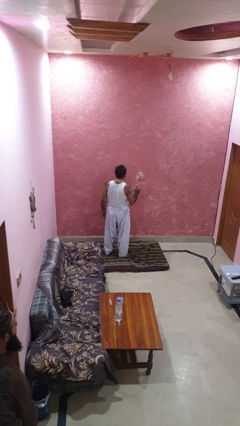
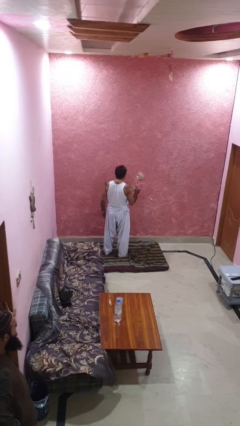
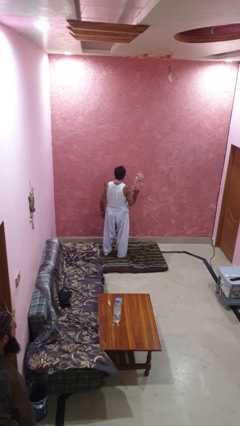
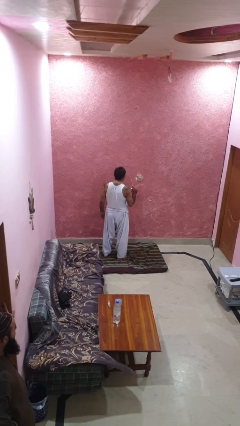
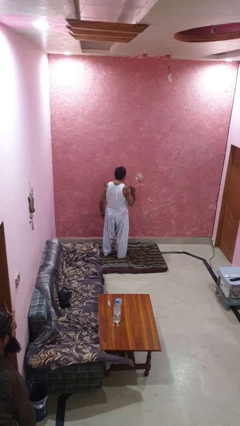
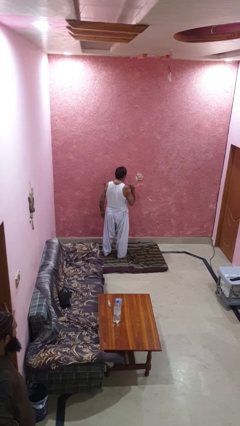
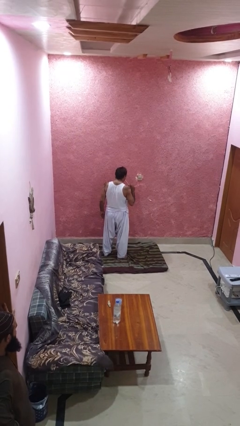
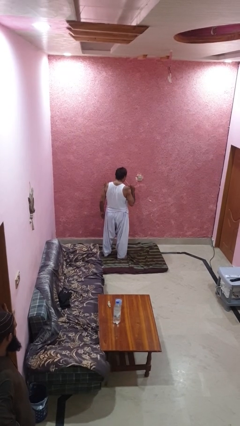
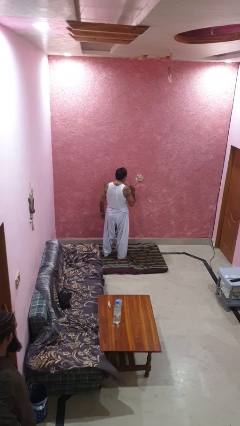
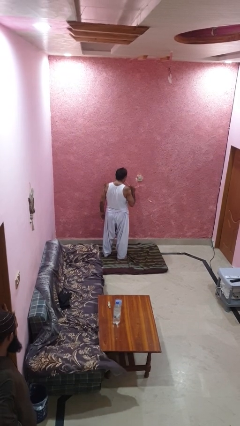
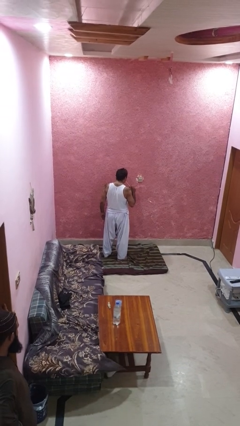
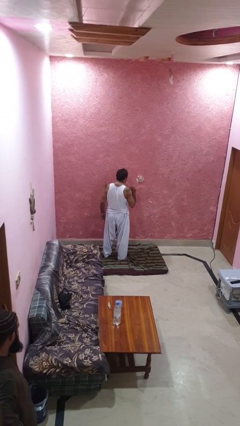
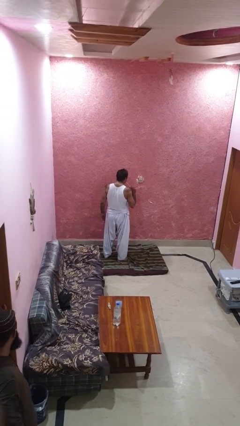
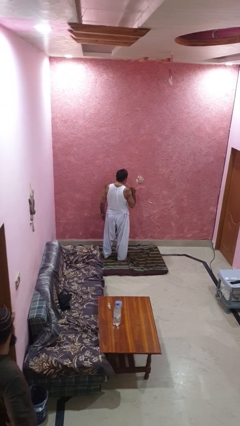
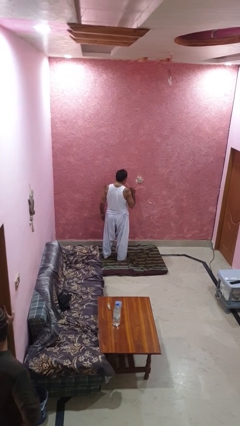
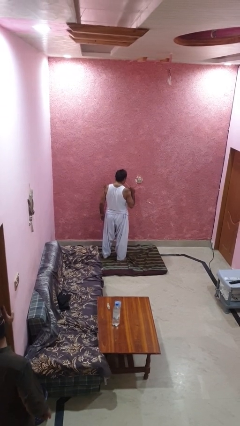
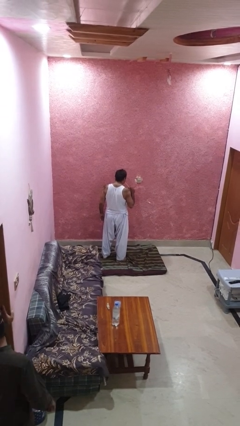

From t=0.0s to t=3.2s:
person drinks from straw

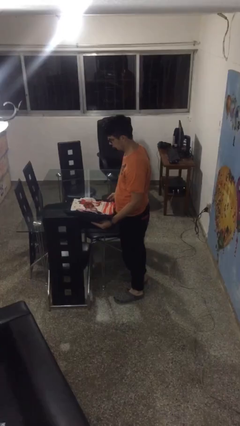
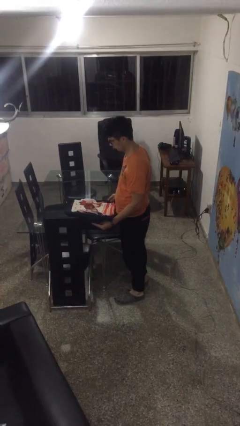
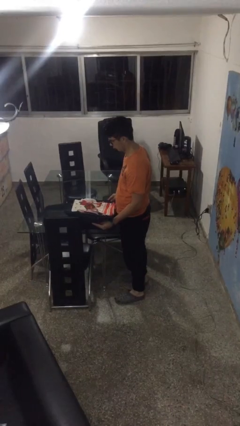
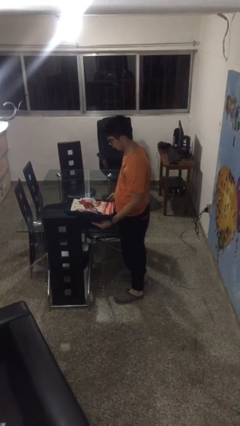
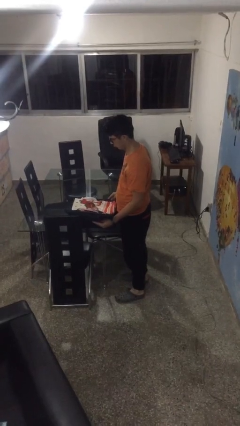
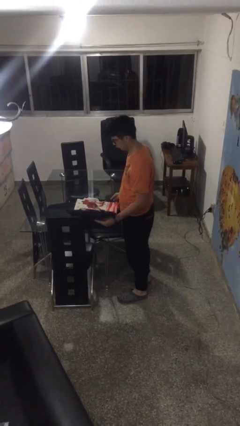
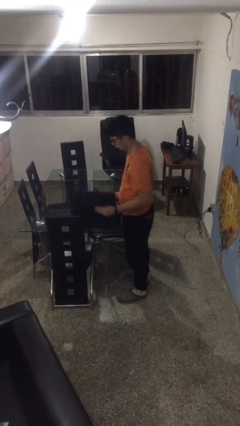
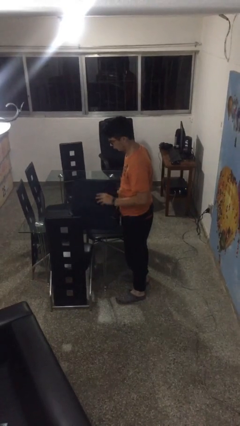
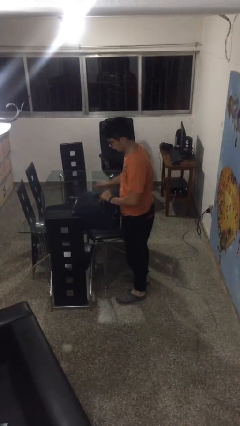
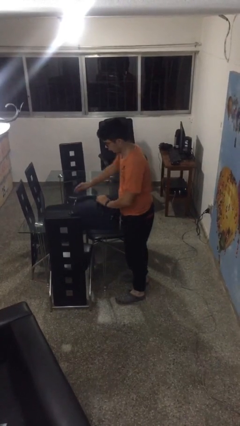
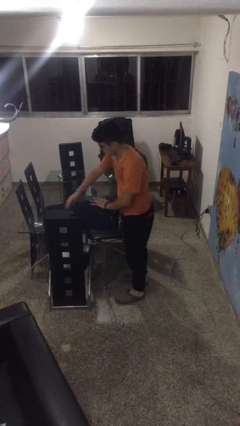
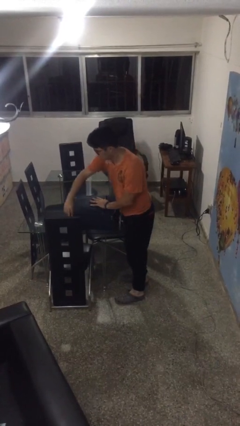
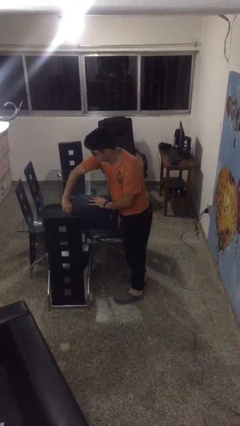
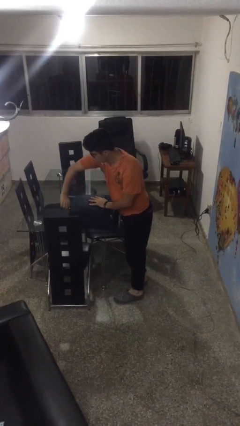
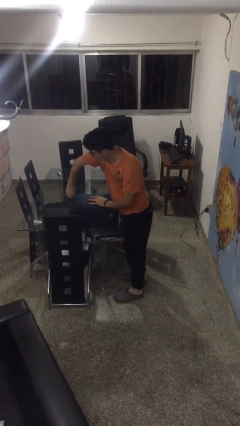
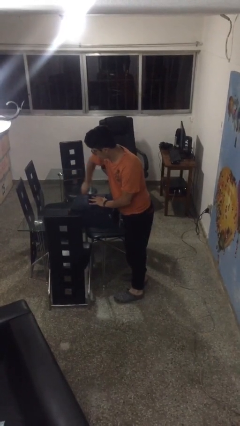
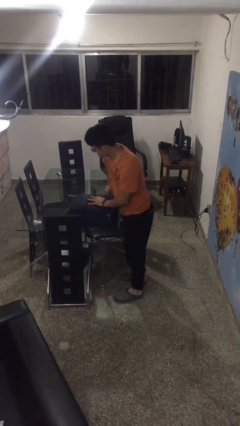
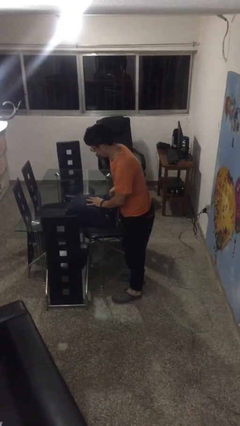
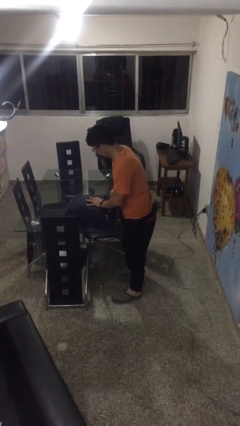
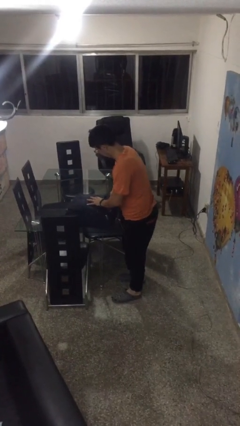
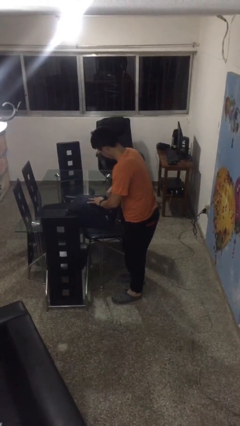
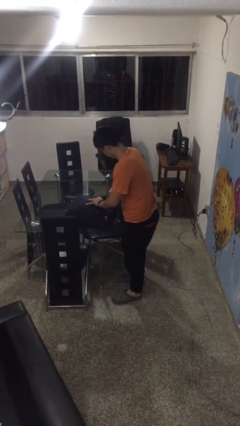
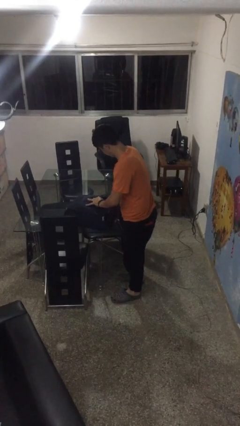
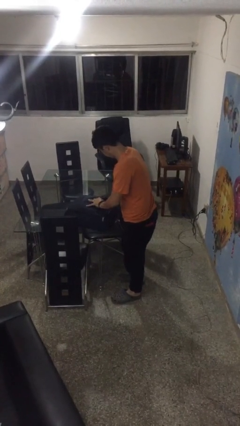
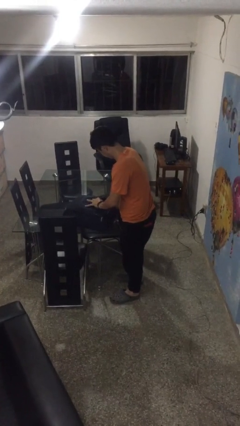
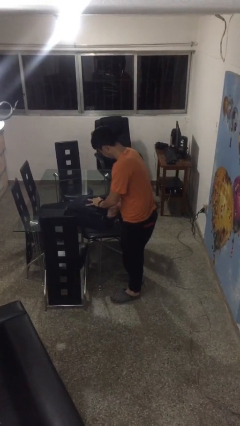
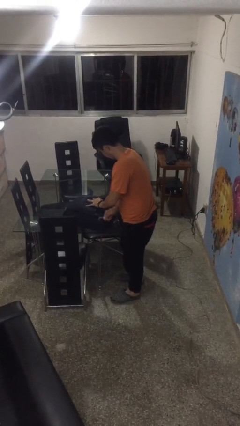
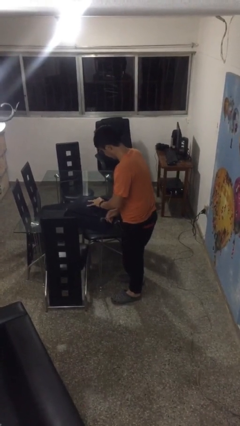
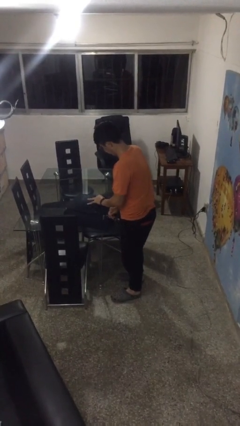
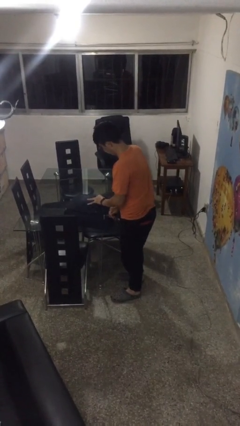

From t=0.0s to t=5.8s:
person closes suitcase

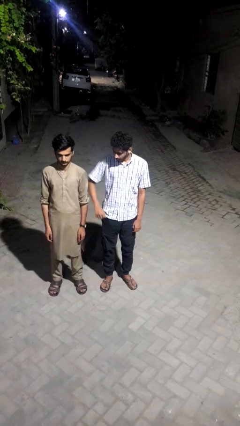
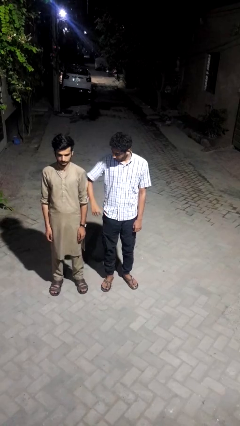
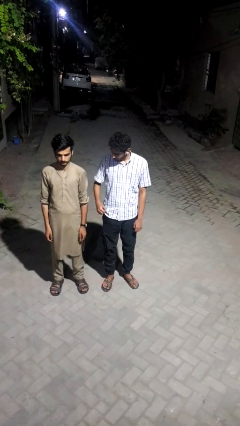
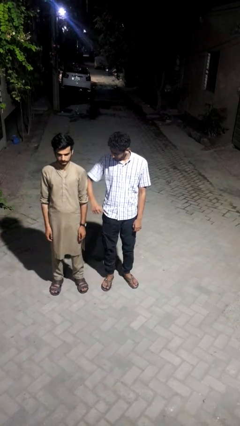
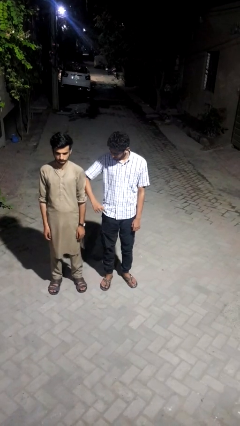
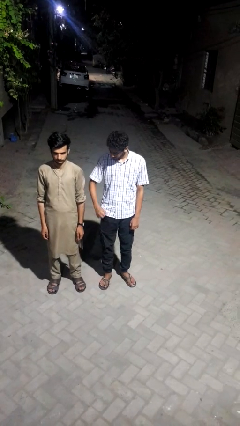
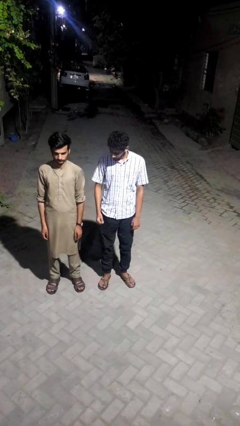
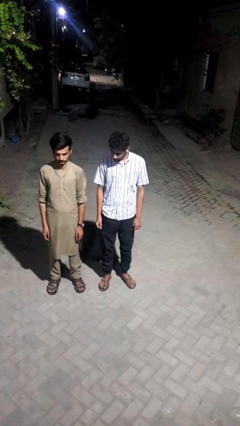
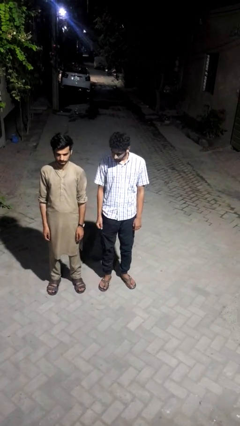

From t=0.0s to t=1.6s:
person nudges person with elbow

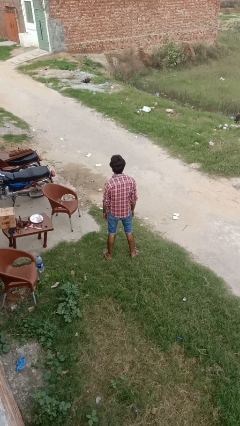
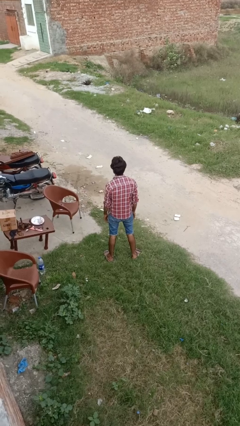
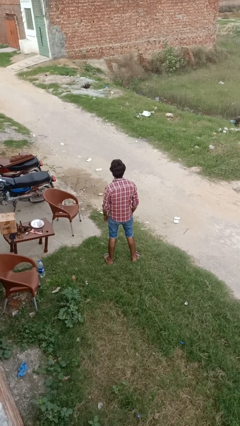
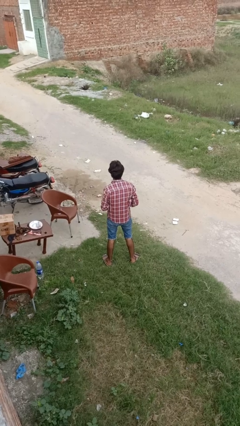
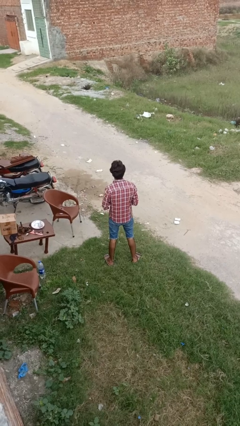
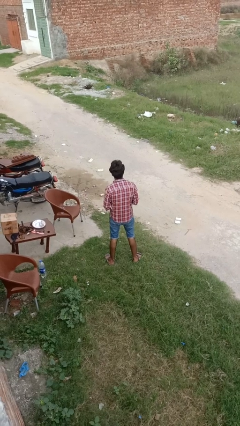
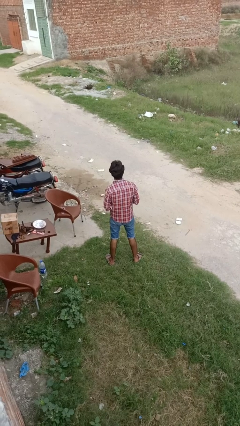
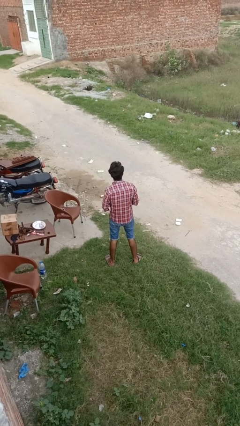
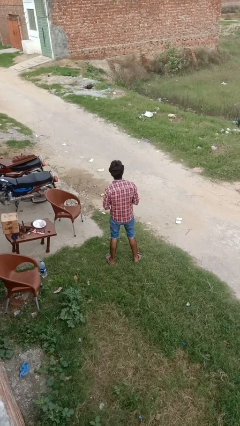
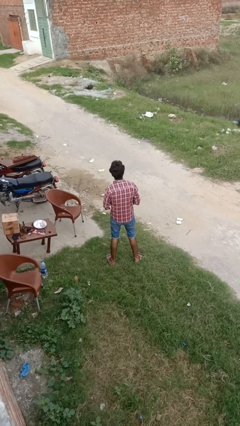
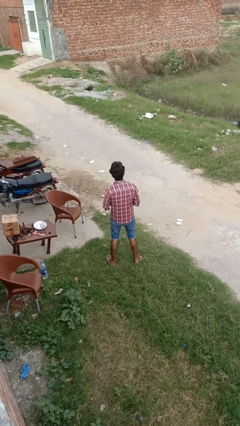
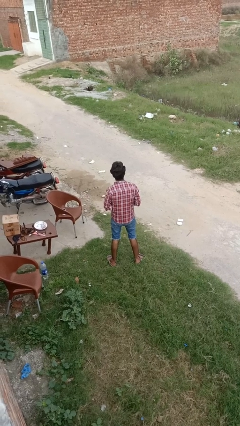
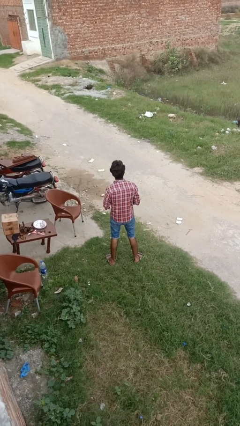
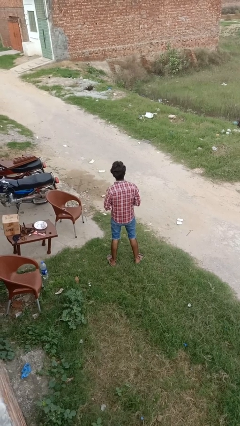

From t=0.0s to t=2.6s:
person puts on ring

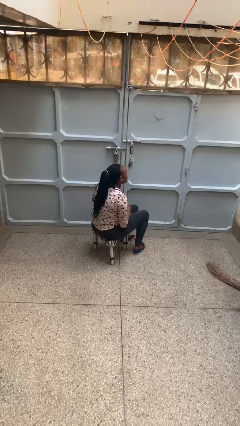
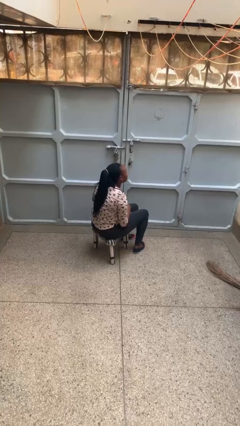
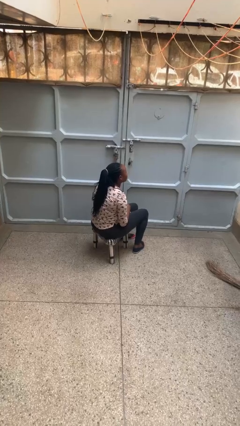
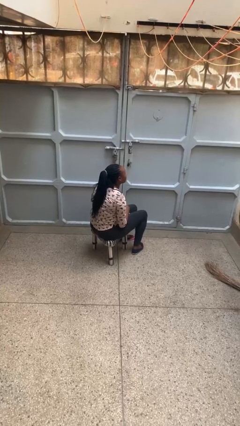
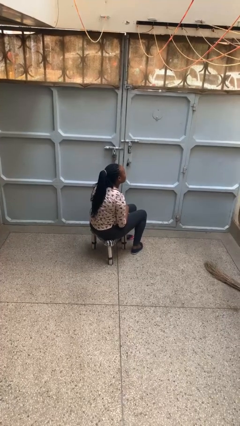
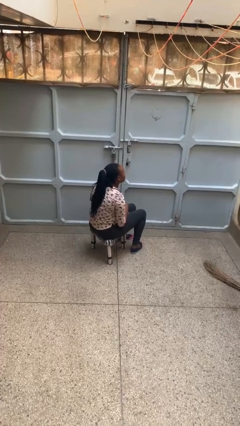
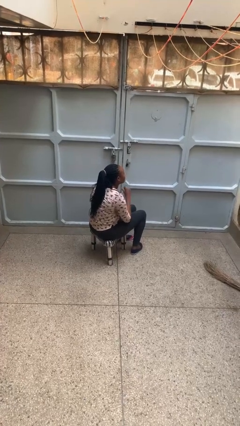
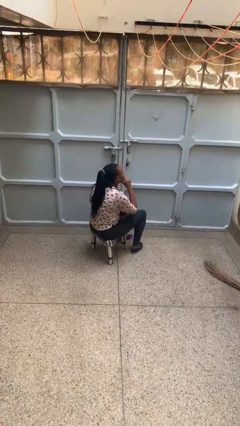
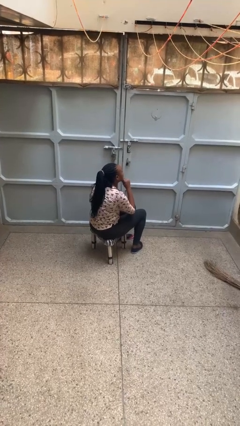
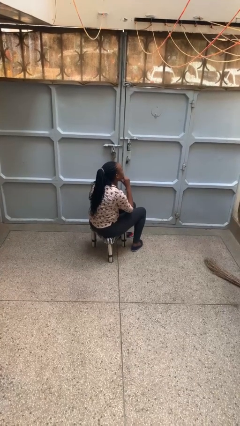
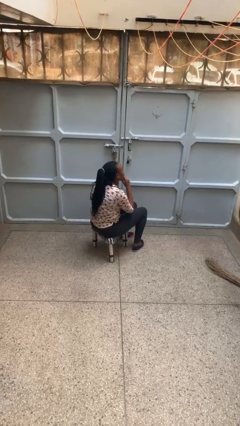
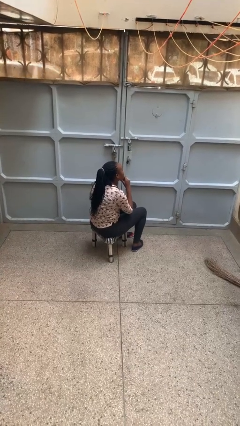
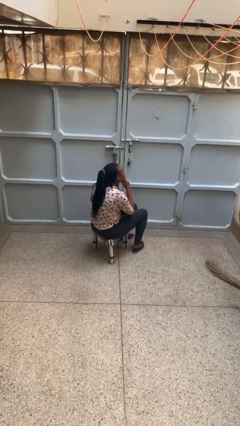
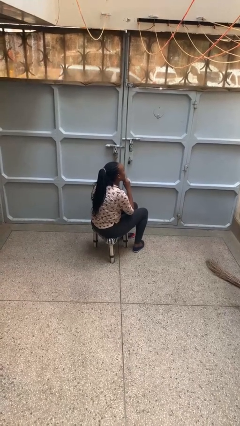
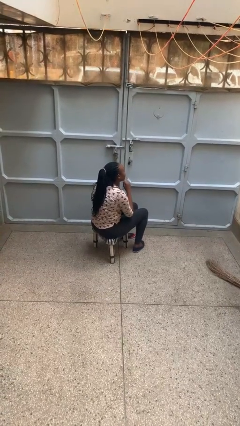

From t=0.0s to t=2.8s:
person strokes chin

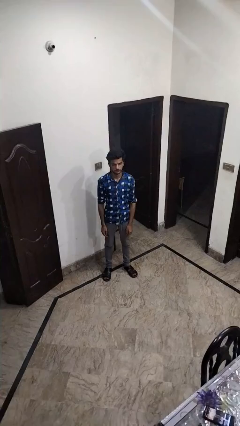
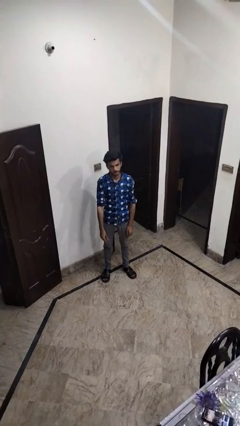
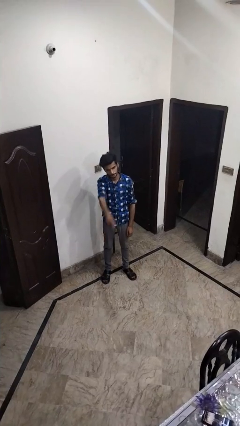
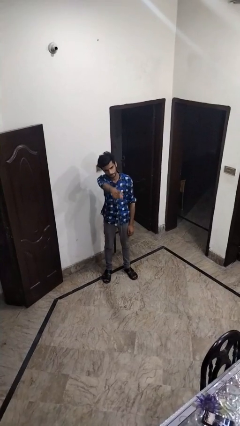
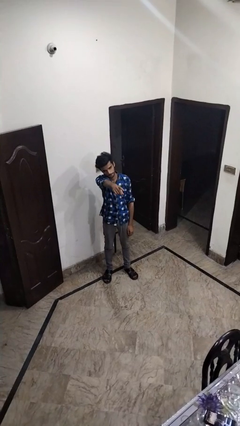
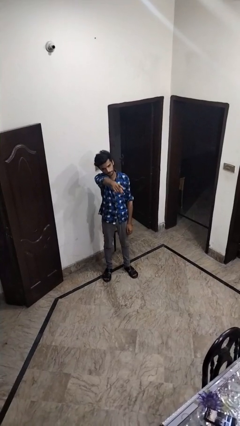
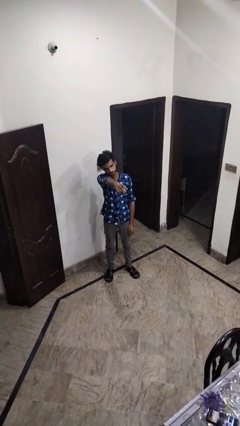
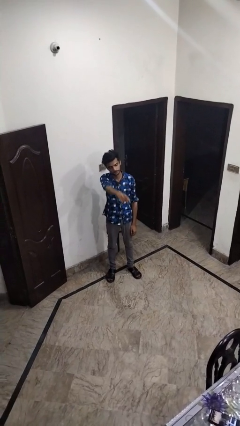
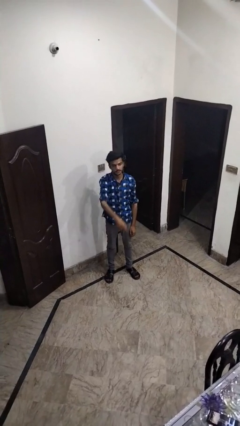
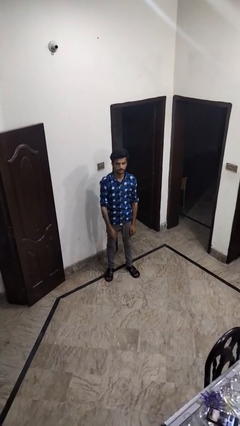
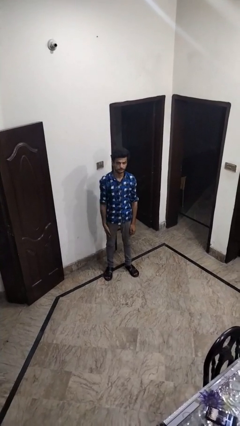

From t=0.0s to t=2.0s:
person points at person
